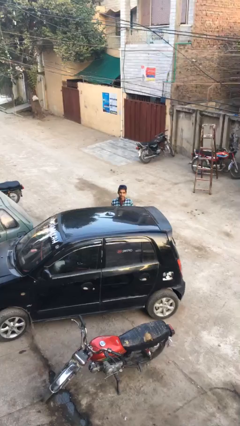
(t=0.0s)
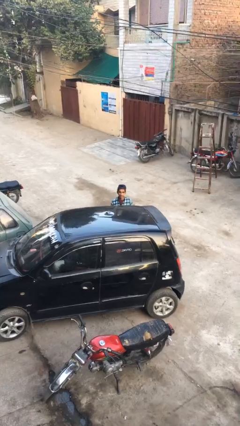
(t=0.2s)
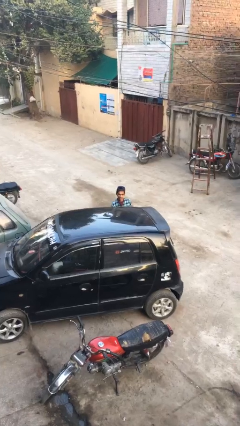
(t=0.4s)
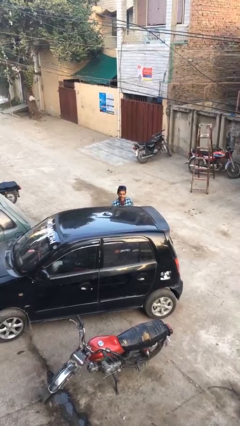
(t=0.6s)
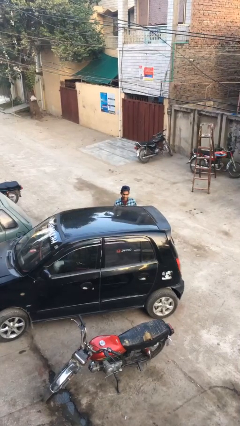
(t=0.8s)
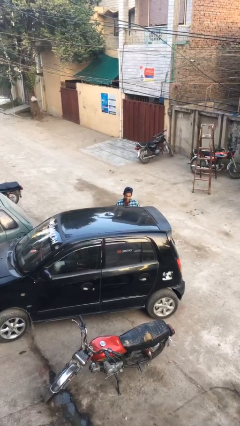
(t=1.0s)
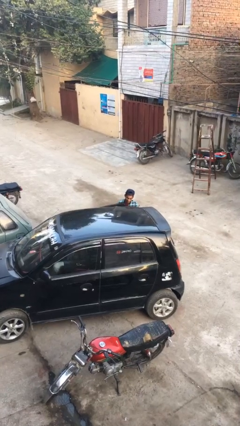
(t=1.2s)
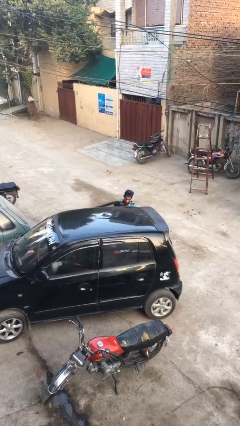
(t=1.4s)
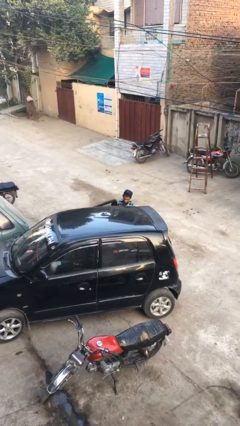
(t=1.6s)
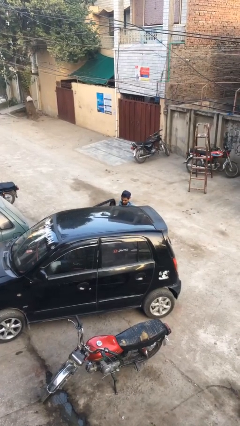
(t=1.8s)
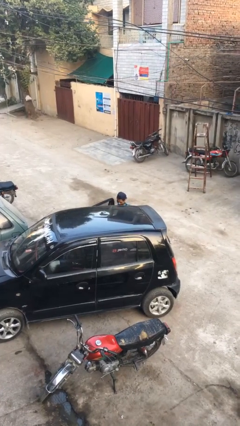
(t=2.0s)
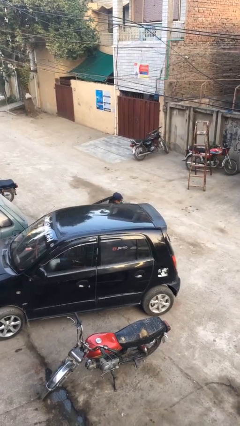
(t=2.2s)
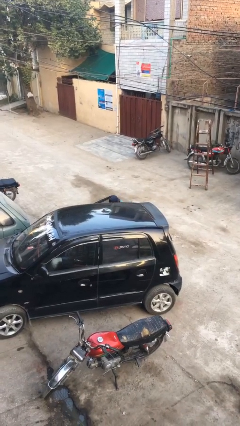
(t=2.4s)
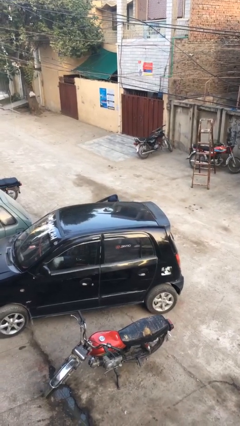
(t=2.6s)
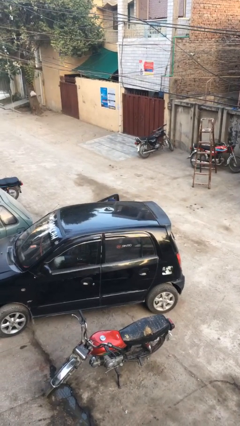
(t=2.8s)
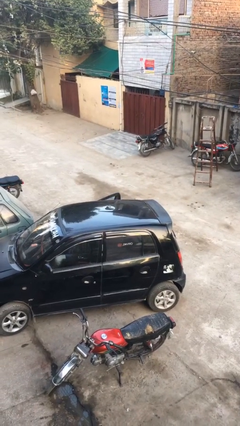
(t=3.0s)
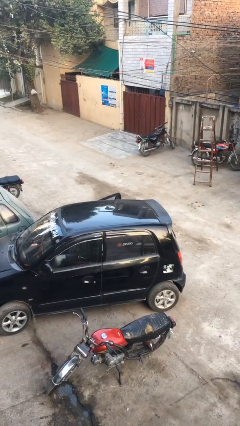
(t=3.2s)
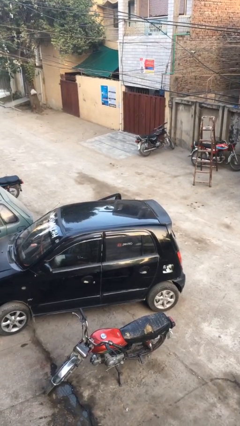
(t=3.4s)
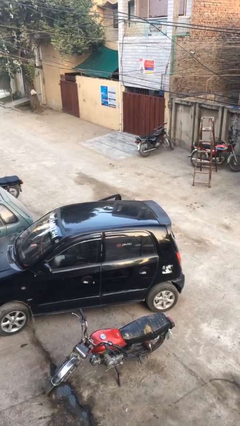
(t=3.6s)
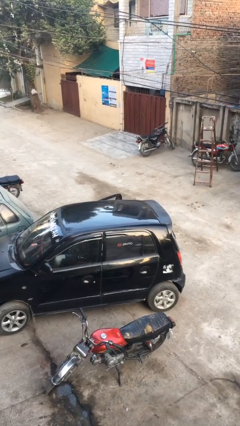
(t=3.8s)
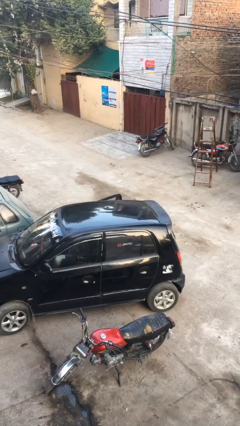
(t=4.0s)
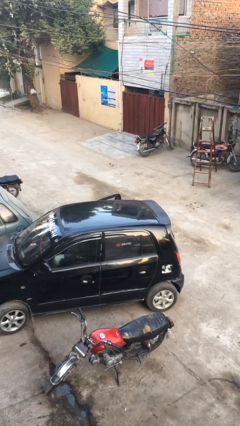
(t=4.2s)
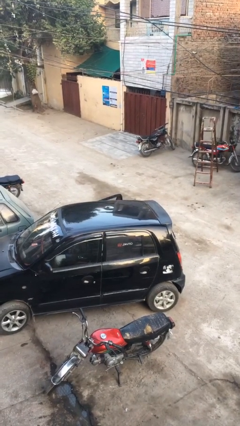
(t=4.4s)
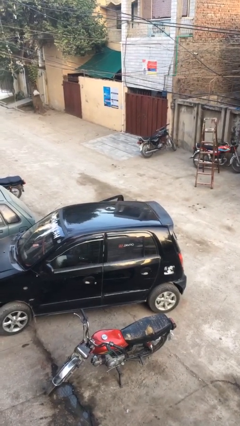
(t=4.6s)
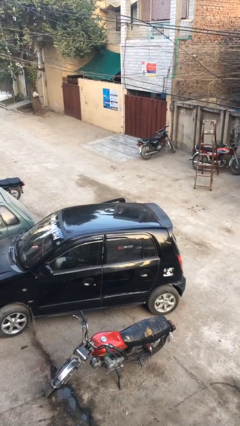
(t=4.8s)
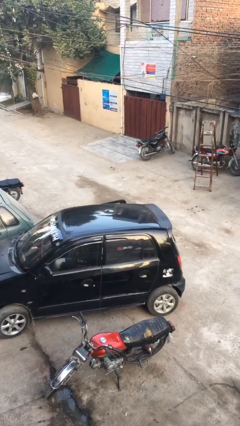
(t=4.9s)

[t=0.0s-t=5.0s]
car picks up person

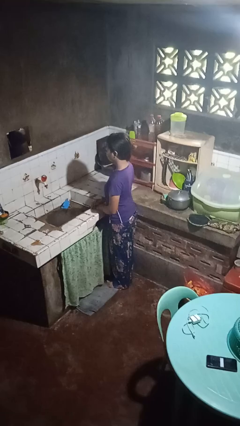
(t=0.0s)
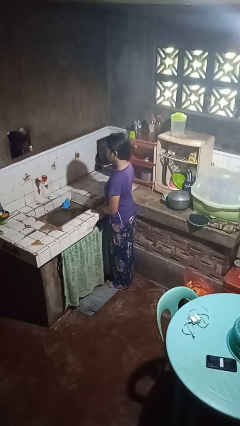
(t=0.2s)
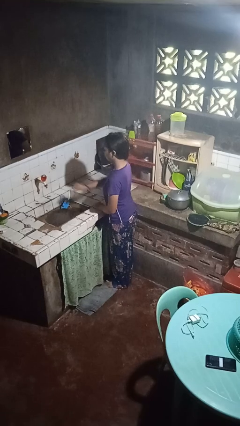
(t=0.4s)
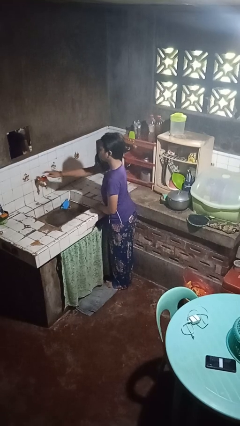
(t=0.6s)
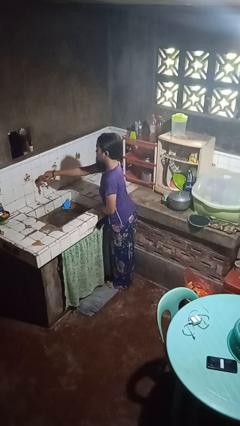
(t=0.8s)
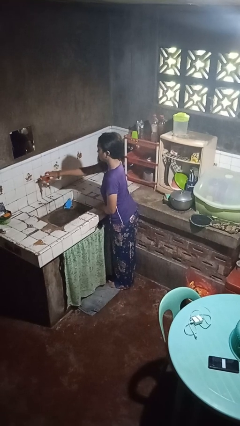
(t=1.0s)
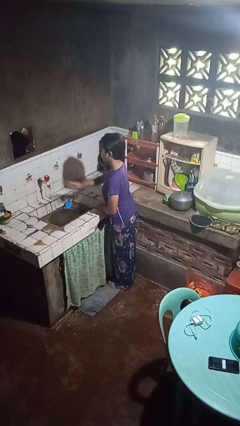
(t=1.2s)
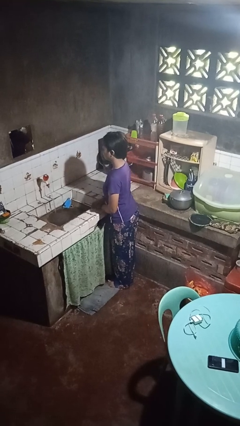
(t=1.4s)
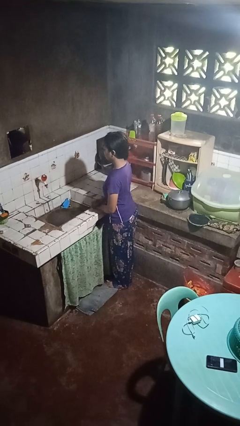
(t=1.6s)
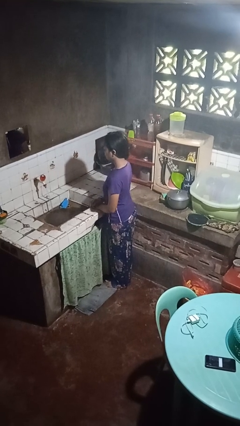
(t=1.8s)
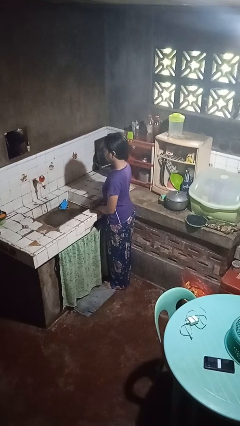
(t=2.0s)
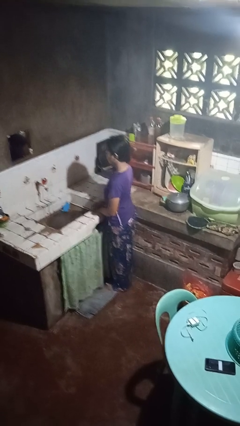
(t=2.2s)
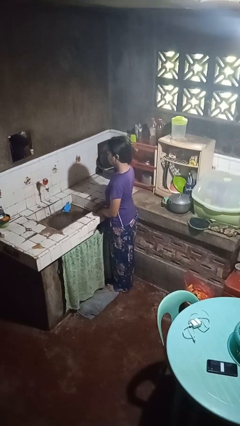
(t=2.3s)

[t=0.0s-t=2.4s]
person turns on faucet

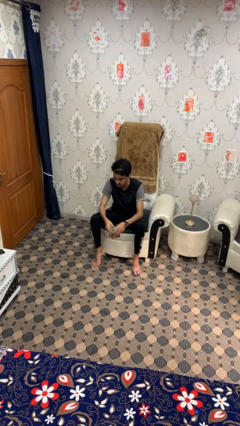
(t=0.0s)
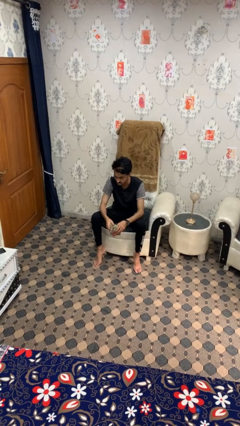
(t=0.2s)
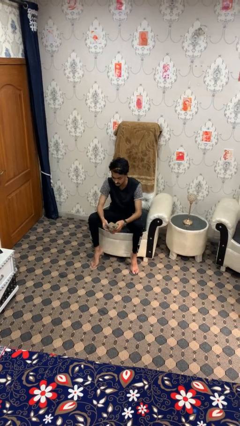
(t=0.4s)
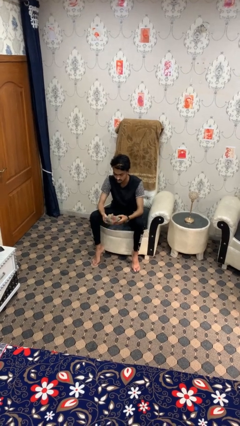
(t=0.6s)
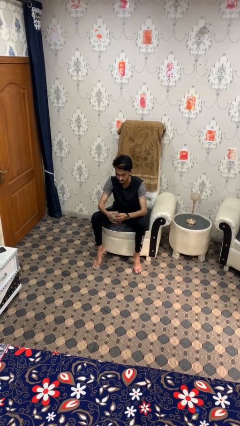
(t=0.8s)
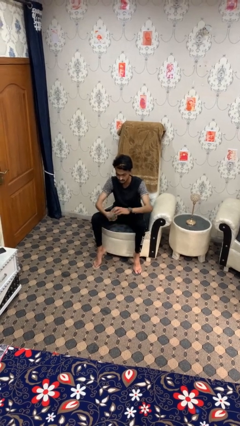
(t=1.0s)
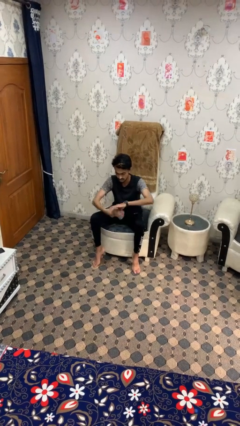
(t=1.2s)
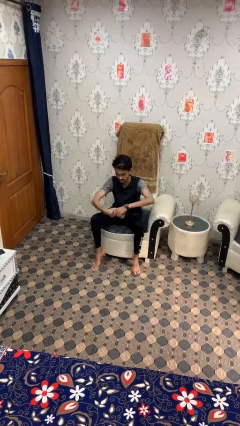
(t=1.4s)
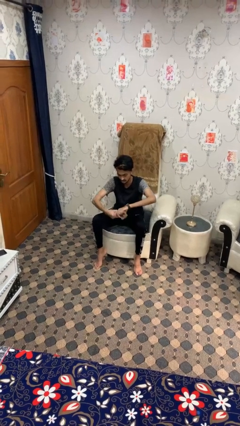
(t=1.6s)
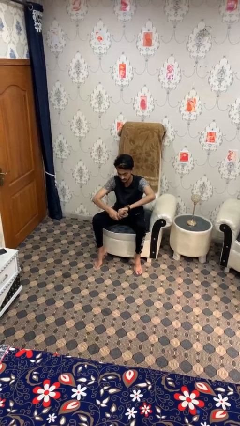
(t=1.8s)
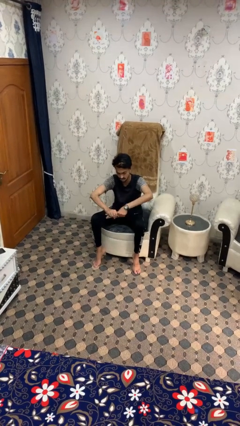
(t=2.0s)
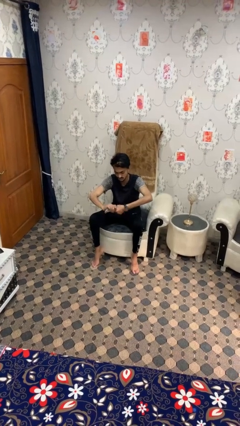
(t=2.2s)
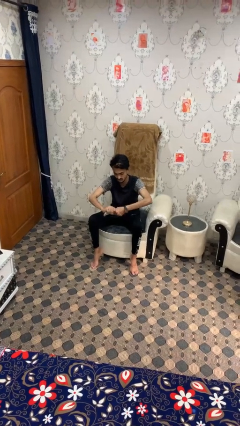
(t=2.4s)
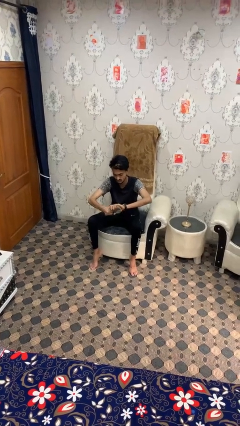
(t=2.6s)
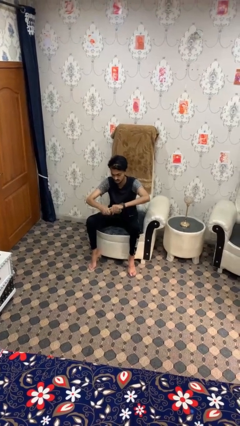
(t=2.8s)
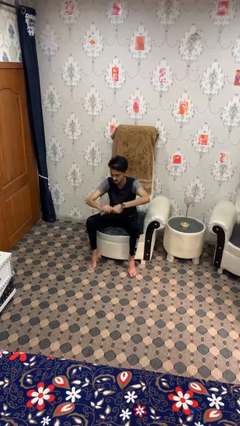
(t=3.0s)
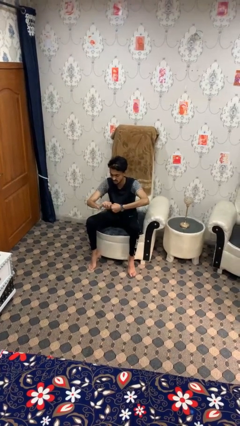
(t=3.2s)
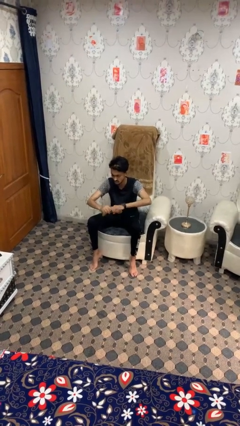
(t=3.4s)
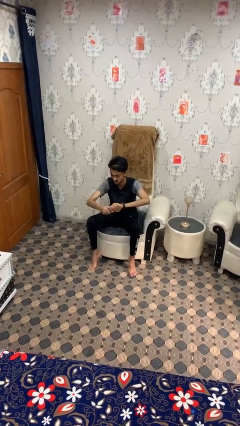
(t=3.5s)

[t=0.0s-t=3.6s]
person squeezes object

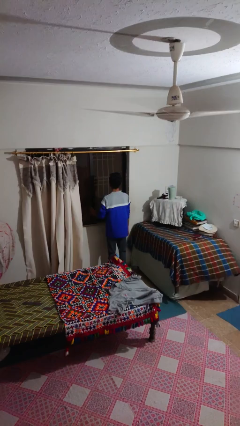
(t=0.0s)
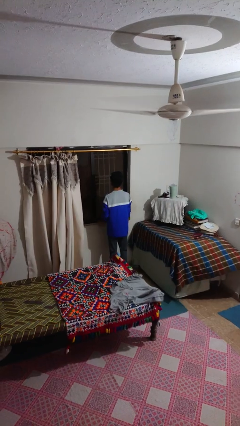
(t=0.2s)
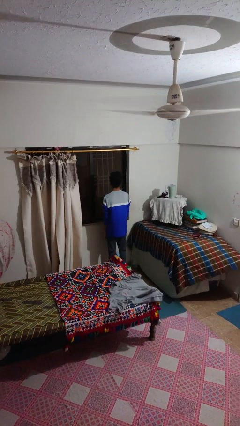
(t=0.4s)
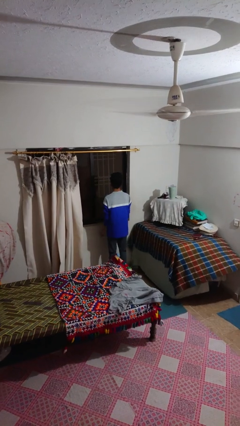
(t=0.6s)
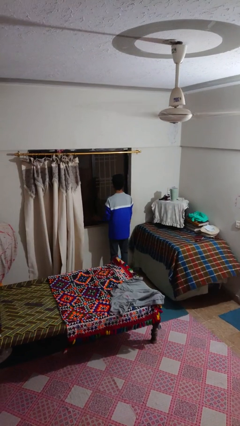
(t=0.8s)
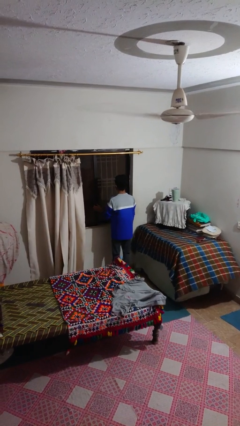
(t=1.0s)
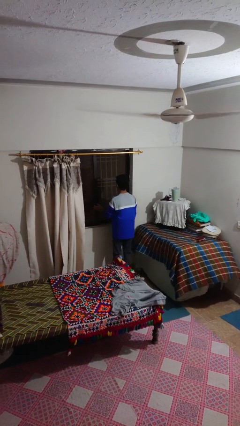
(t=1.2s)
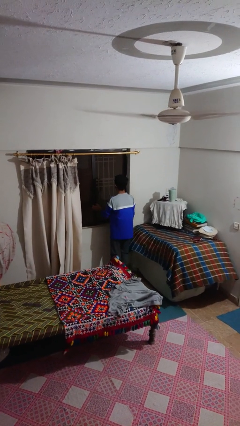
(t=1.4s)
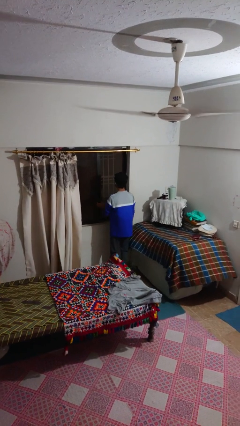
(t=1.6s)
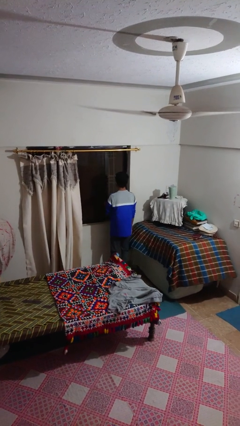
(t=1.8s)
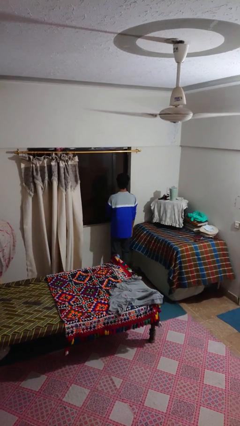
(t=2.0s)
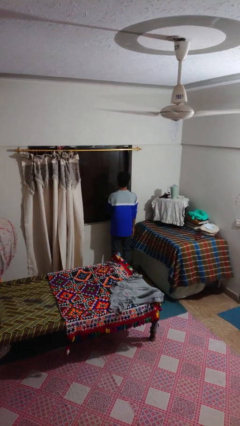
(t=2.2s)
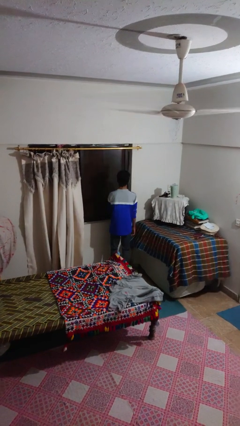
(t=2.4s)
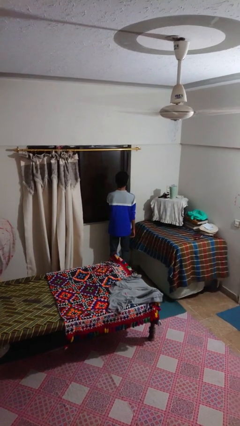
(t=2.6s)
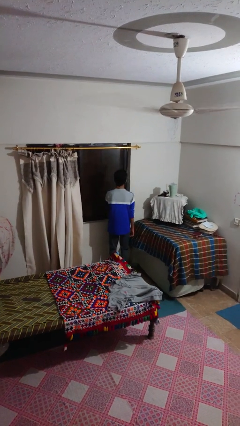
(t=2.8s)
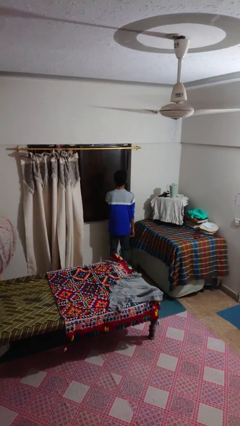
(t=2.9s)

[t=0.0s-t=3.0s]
person closes home window

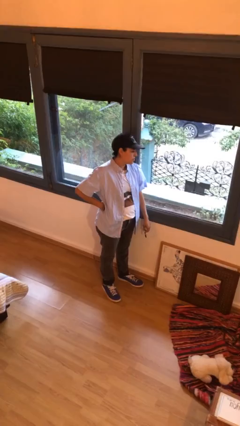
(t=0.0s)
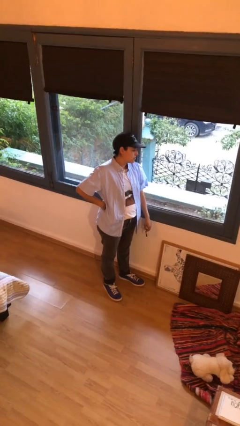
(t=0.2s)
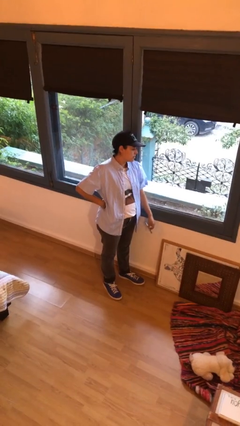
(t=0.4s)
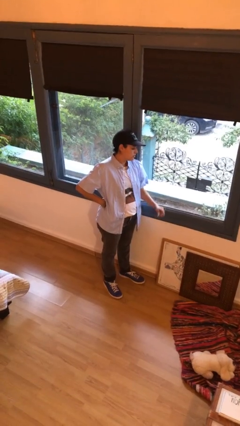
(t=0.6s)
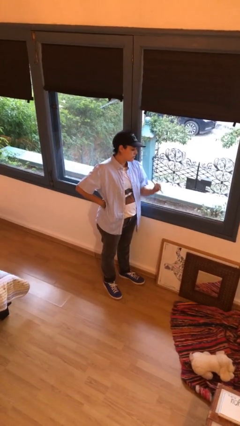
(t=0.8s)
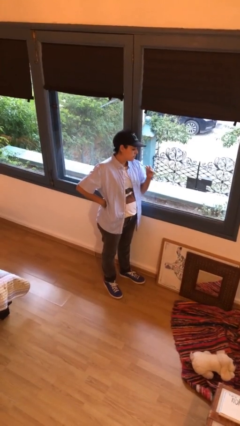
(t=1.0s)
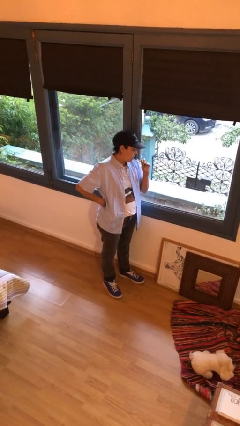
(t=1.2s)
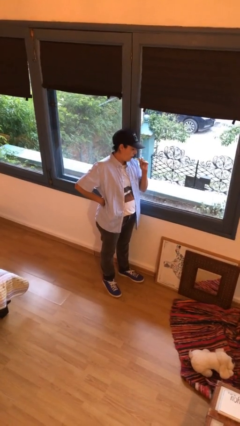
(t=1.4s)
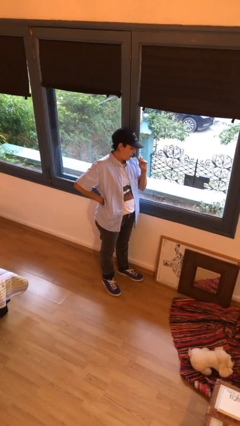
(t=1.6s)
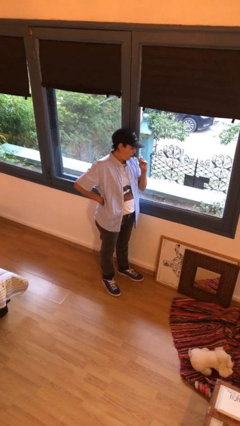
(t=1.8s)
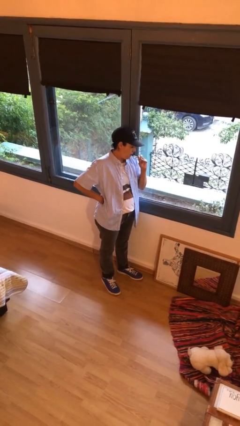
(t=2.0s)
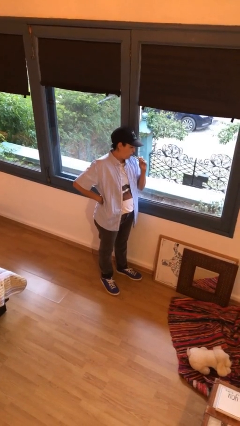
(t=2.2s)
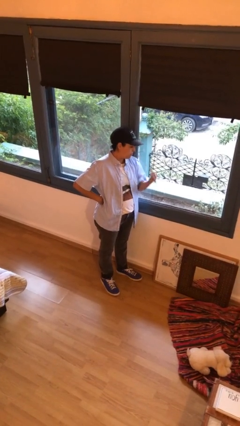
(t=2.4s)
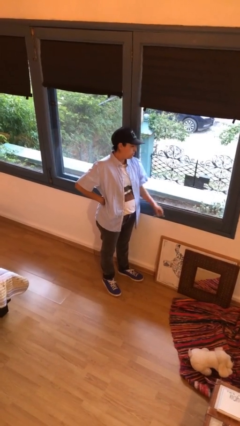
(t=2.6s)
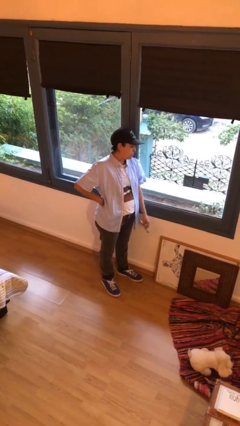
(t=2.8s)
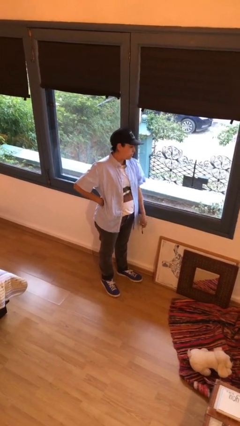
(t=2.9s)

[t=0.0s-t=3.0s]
person vapes

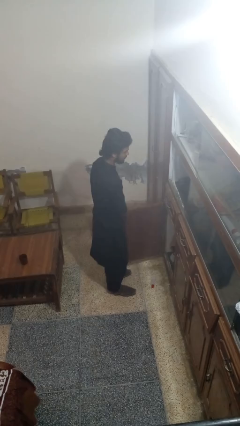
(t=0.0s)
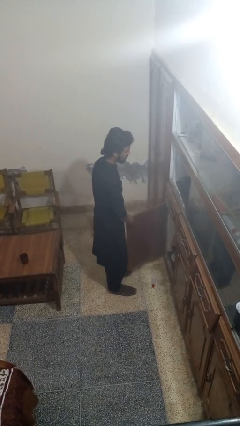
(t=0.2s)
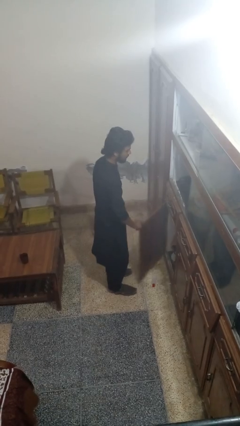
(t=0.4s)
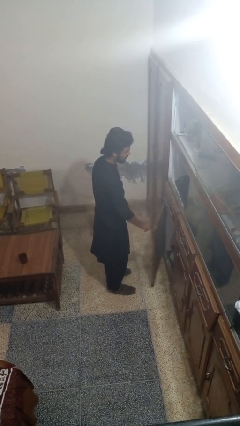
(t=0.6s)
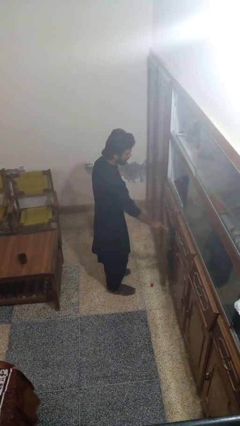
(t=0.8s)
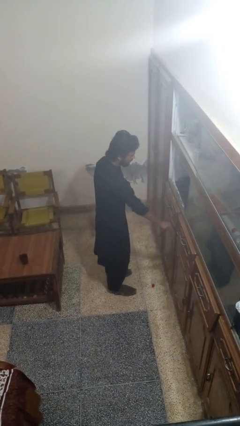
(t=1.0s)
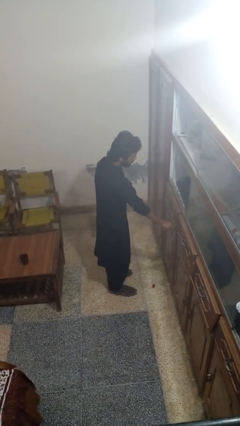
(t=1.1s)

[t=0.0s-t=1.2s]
person closes cabinet
